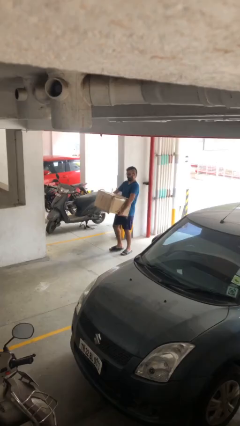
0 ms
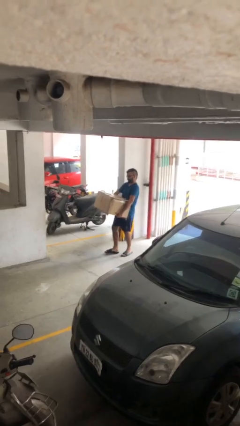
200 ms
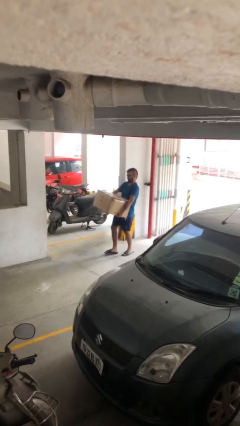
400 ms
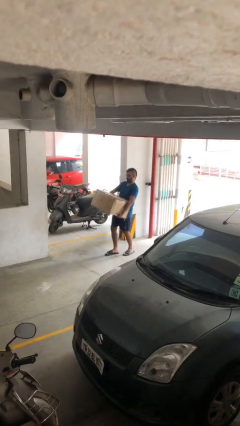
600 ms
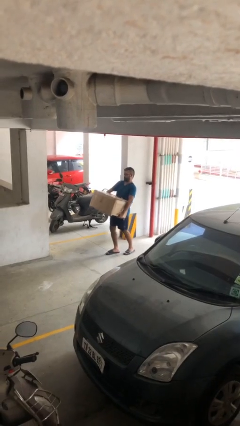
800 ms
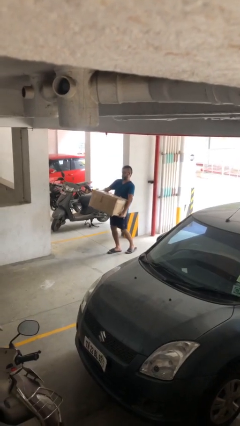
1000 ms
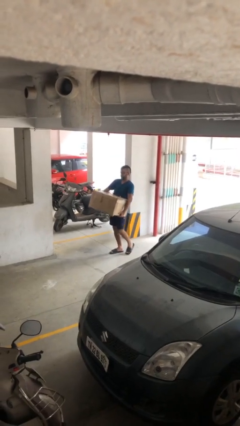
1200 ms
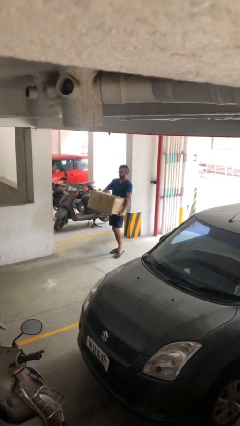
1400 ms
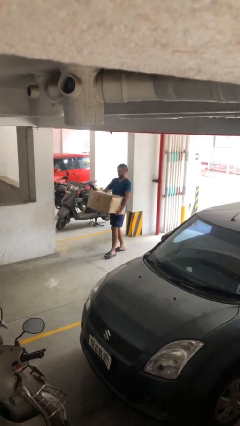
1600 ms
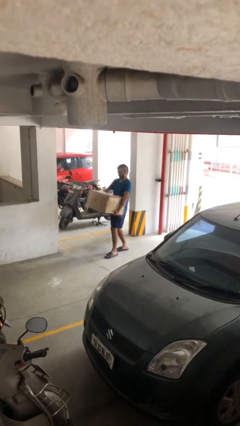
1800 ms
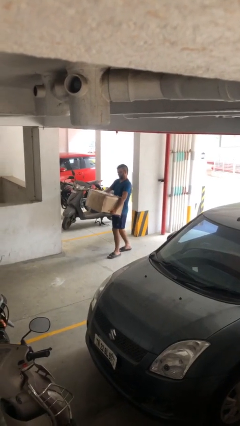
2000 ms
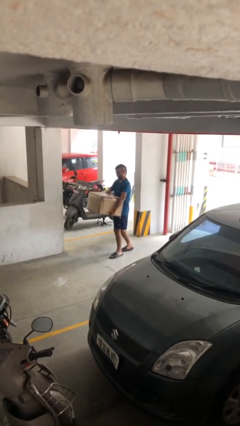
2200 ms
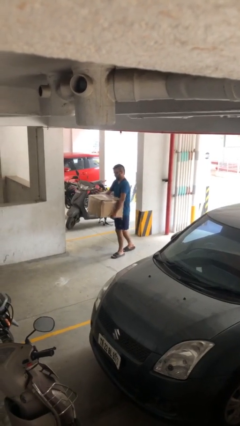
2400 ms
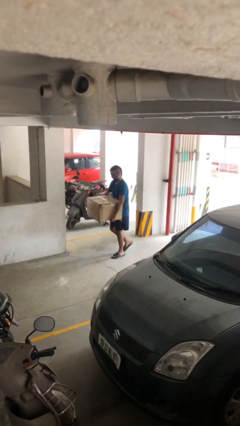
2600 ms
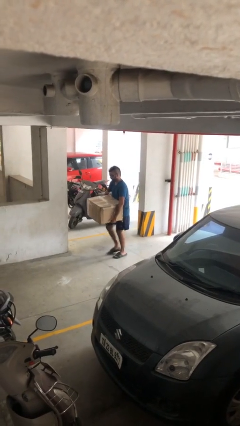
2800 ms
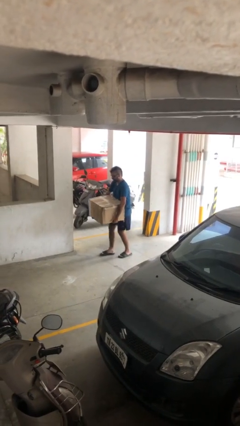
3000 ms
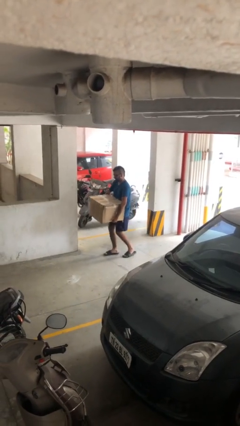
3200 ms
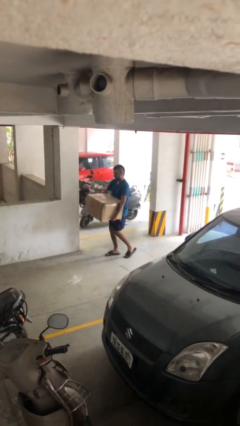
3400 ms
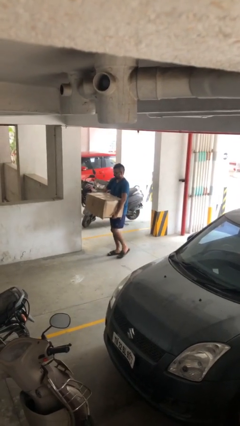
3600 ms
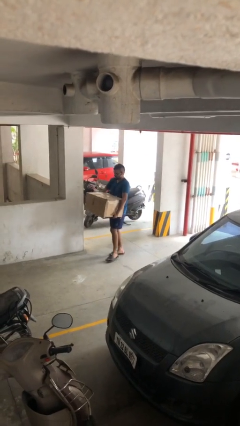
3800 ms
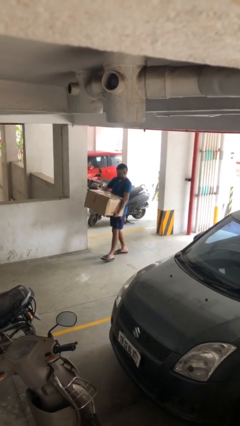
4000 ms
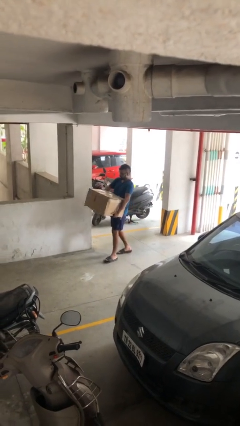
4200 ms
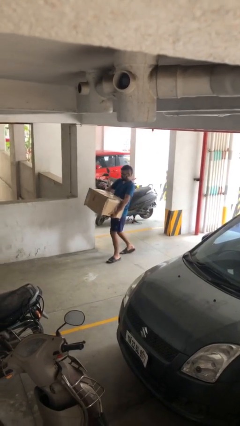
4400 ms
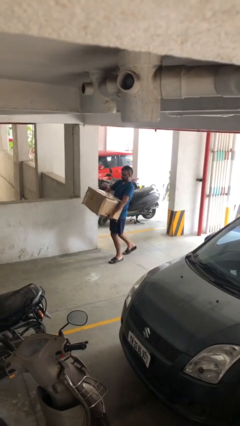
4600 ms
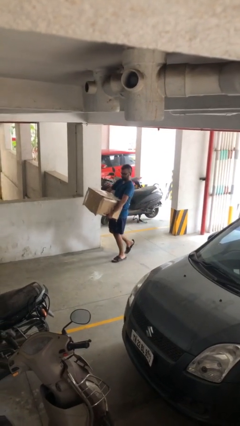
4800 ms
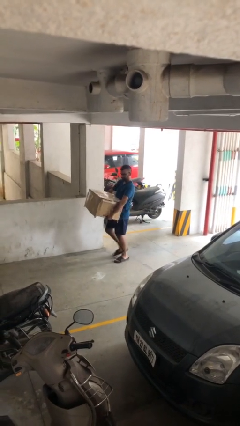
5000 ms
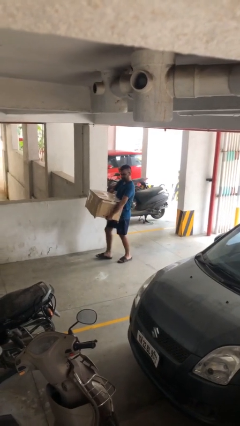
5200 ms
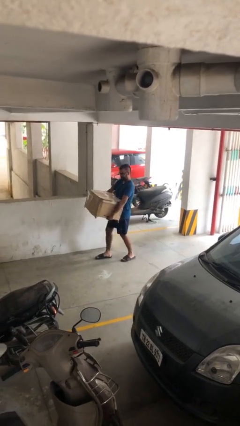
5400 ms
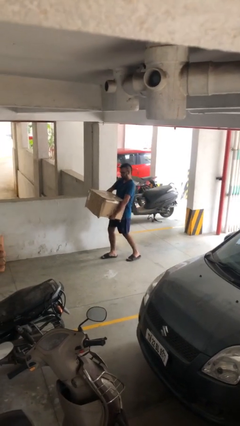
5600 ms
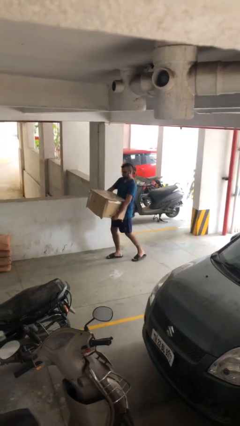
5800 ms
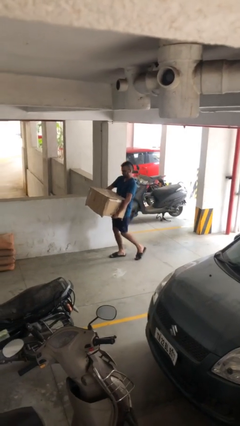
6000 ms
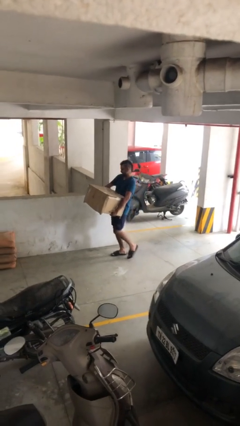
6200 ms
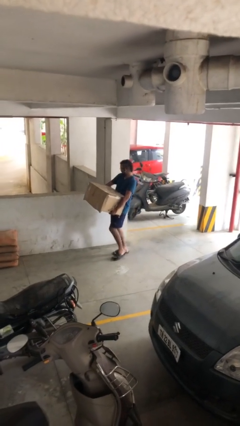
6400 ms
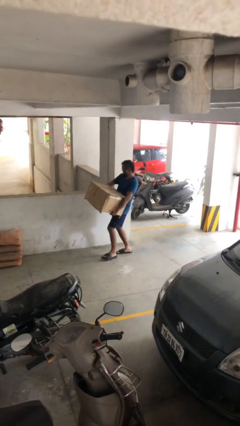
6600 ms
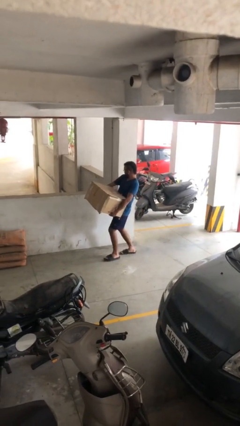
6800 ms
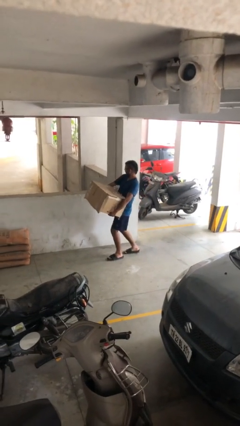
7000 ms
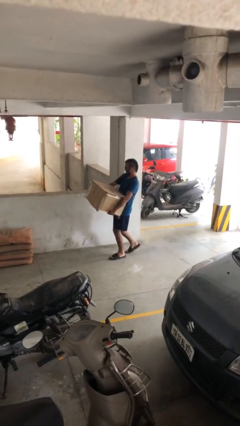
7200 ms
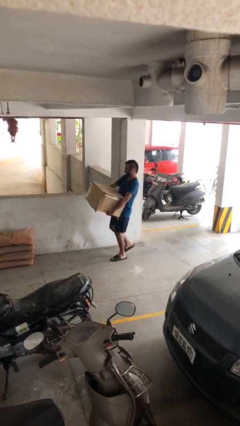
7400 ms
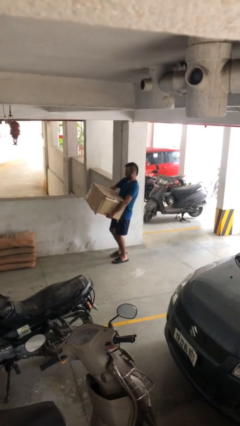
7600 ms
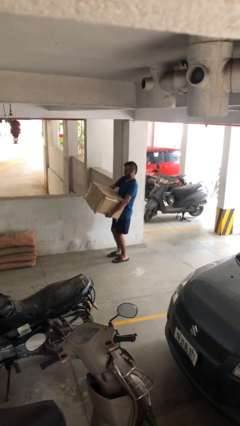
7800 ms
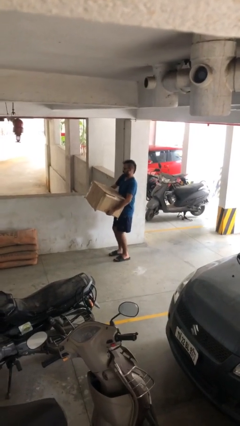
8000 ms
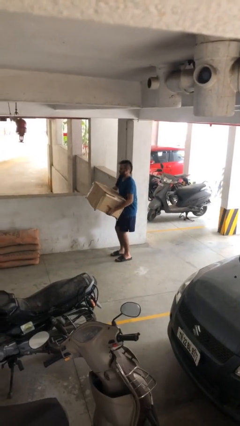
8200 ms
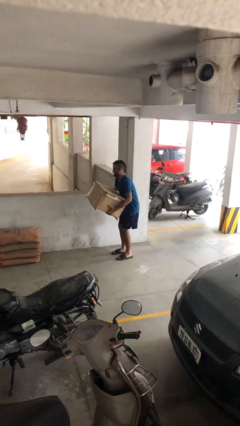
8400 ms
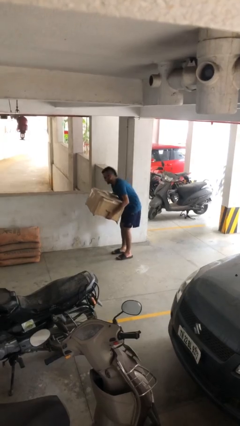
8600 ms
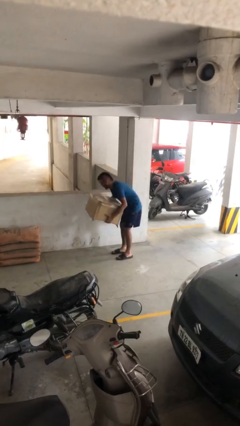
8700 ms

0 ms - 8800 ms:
person carries heavy object

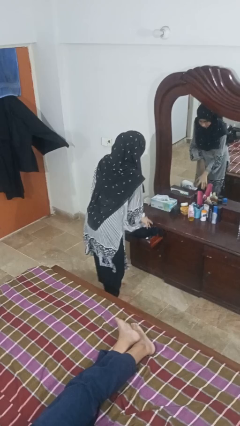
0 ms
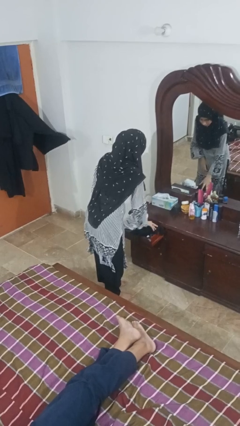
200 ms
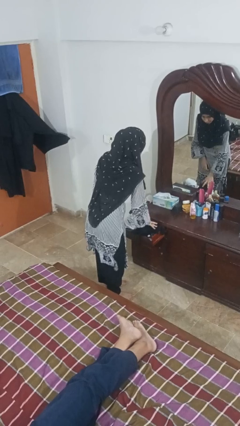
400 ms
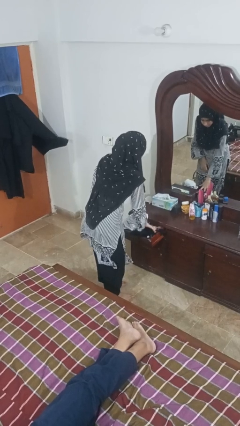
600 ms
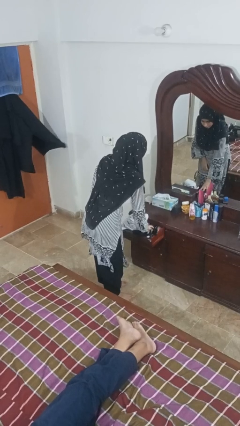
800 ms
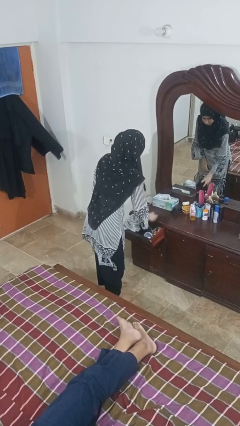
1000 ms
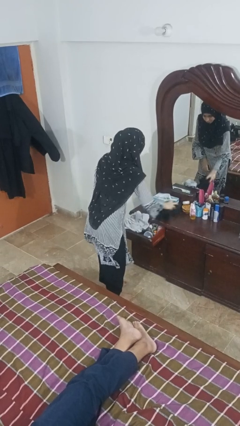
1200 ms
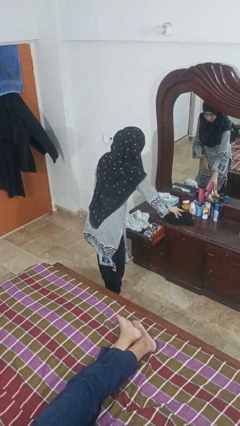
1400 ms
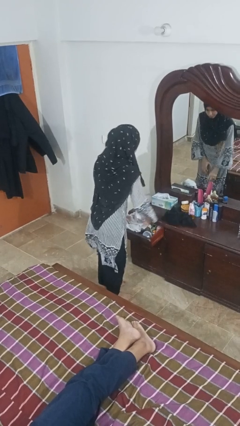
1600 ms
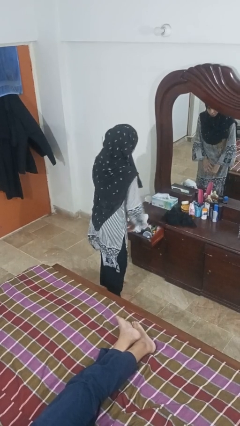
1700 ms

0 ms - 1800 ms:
person takes clothes from dresser

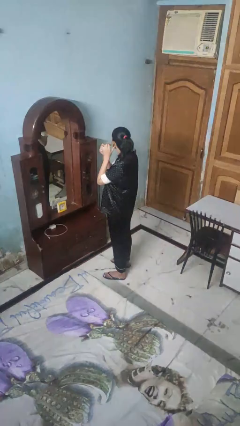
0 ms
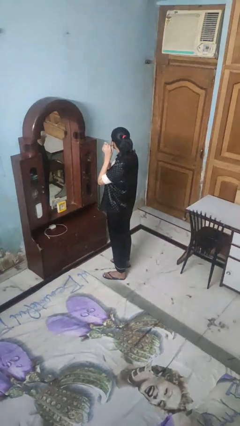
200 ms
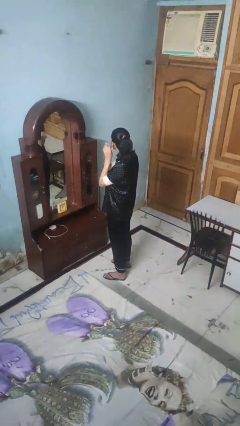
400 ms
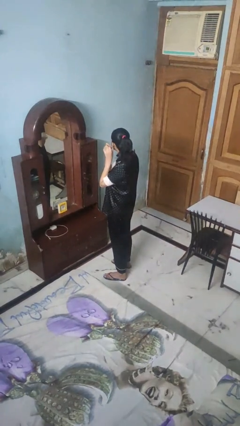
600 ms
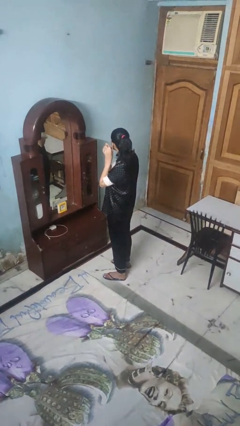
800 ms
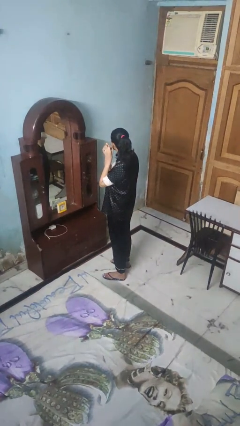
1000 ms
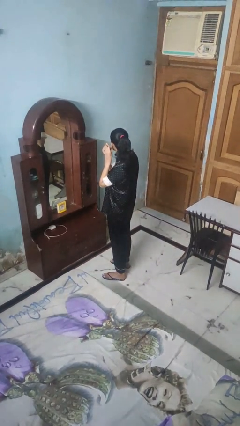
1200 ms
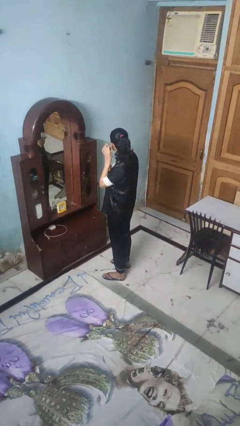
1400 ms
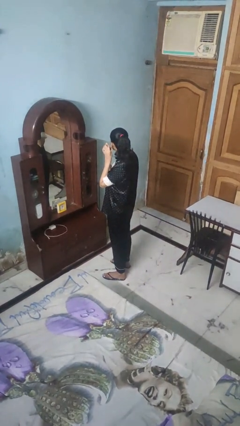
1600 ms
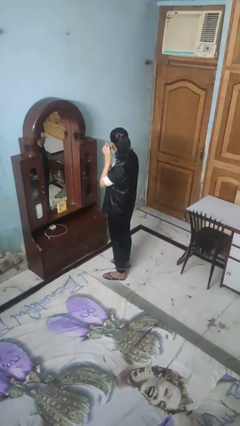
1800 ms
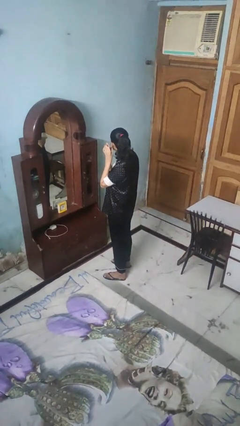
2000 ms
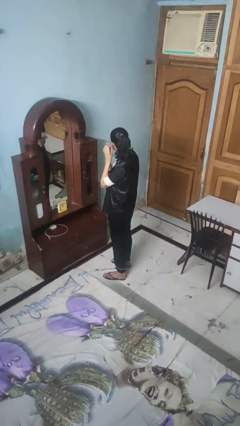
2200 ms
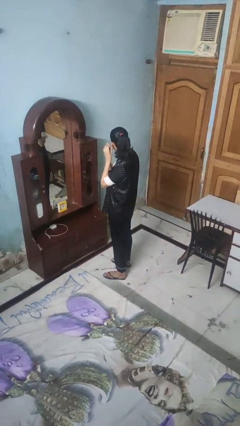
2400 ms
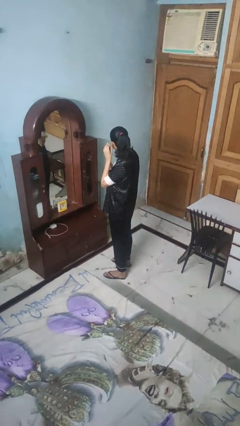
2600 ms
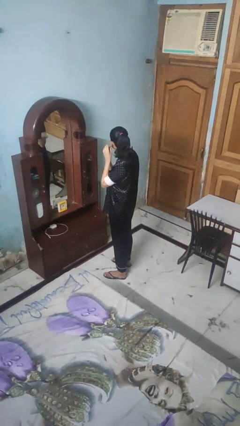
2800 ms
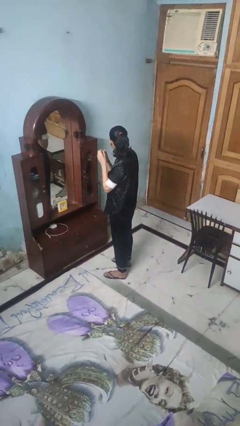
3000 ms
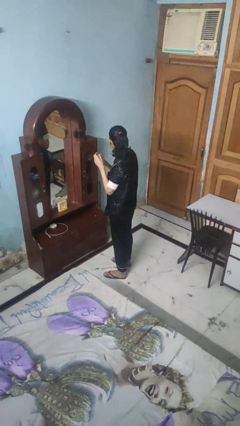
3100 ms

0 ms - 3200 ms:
person puts on earrings

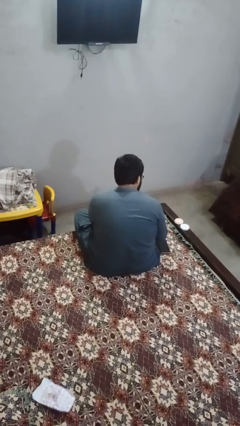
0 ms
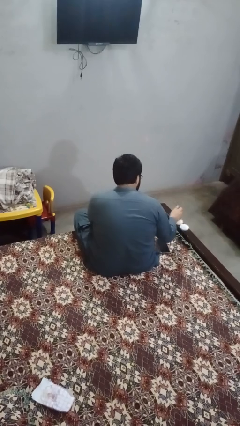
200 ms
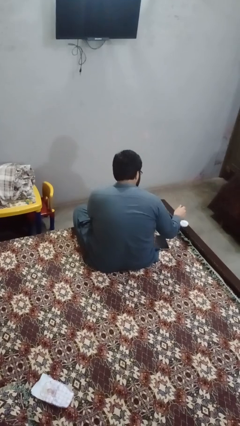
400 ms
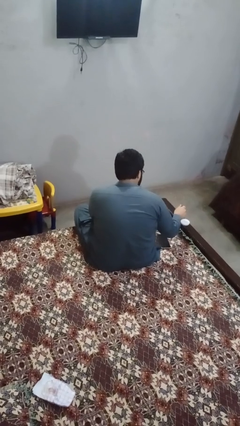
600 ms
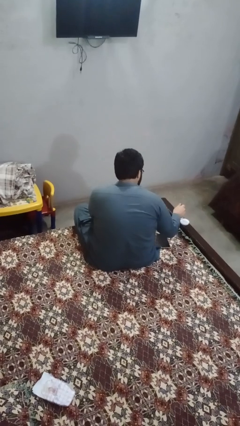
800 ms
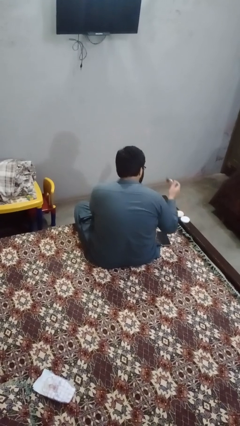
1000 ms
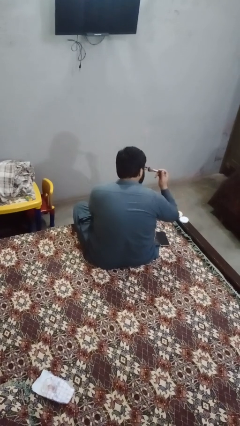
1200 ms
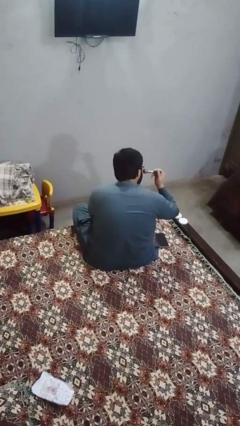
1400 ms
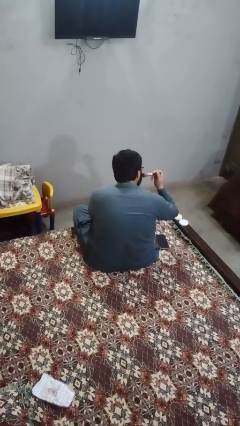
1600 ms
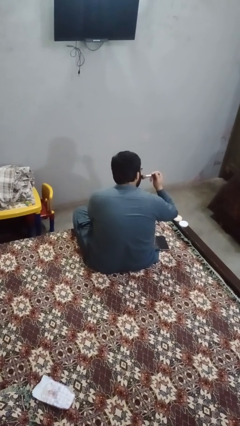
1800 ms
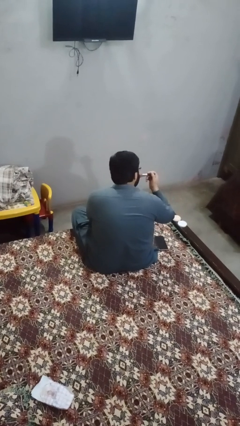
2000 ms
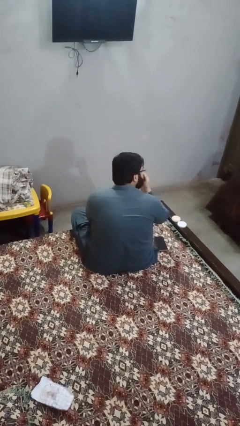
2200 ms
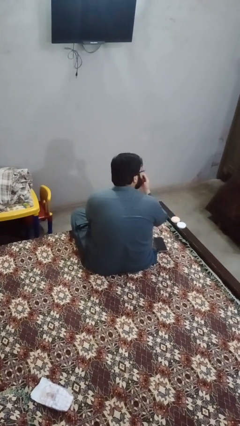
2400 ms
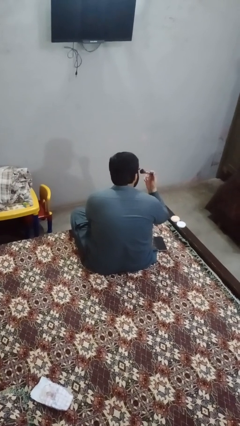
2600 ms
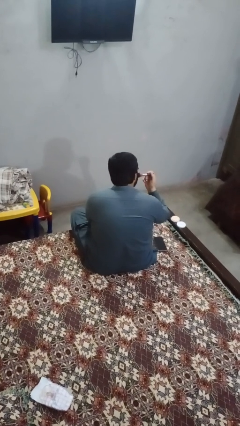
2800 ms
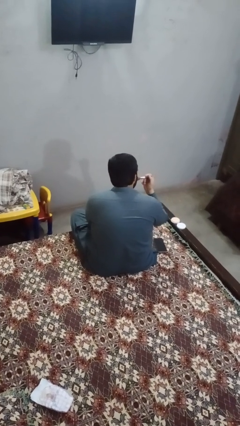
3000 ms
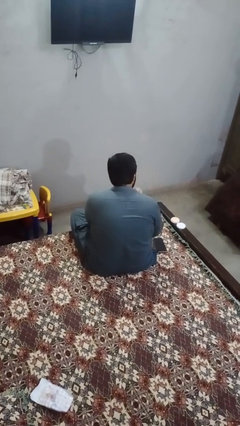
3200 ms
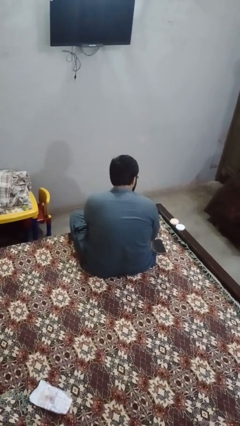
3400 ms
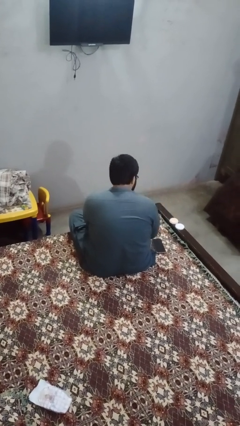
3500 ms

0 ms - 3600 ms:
person applies foundation makeup
